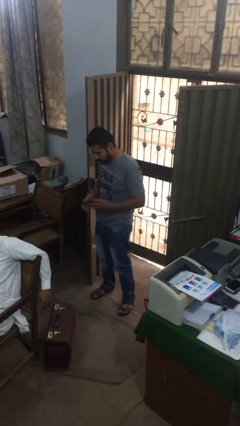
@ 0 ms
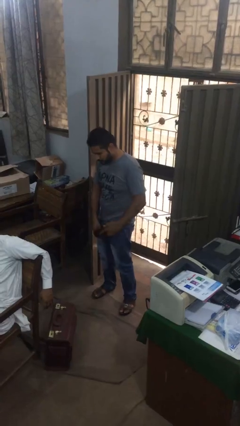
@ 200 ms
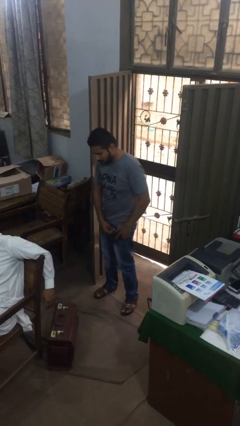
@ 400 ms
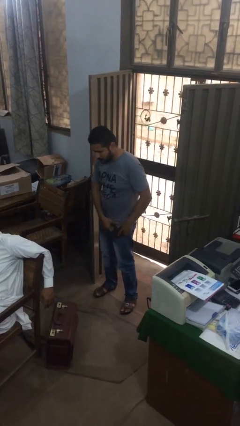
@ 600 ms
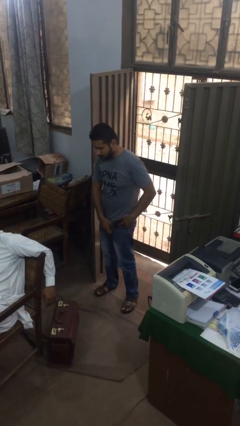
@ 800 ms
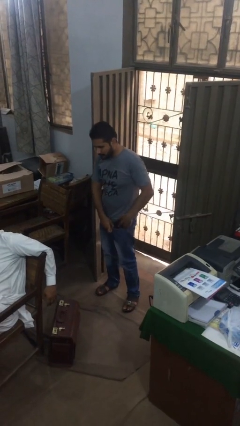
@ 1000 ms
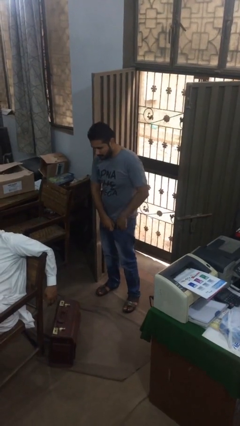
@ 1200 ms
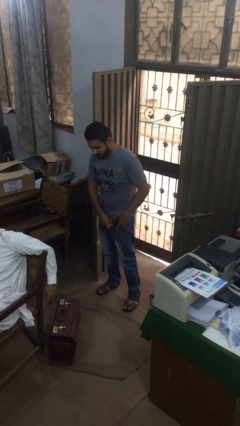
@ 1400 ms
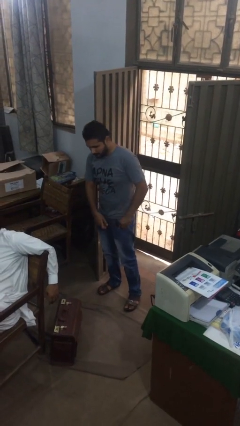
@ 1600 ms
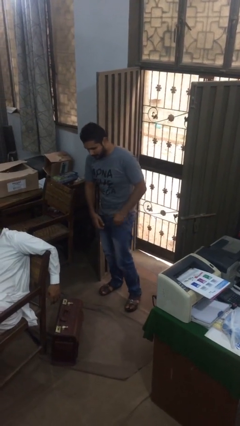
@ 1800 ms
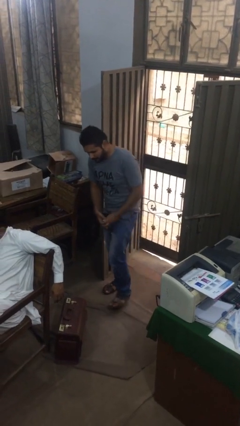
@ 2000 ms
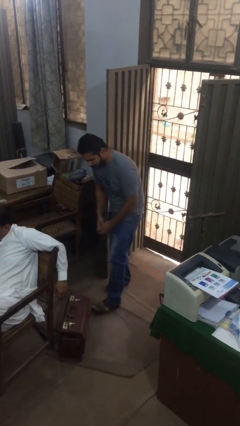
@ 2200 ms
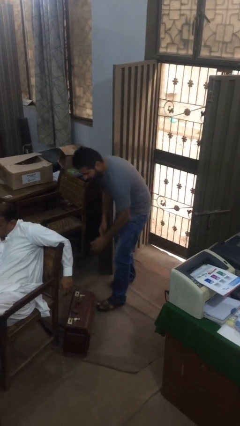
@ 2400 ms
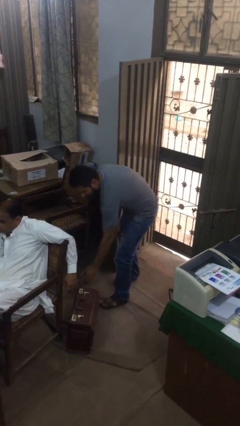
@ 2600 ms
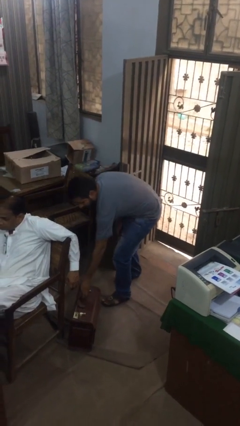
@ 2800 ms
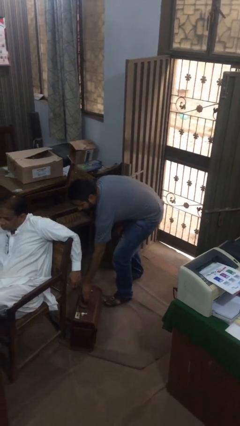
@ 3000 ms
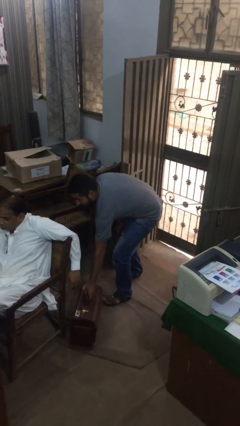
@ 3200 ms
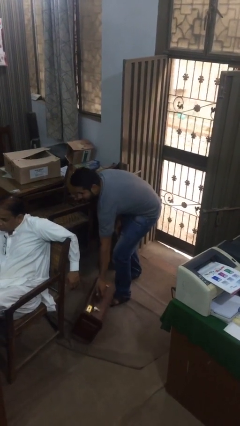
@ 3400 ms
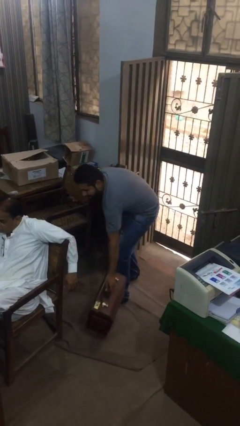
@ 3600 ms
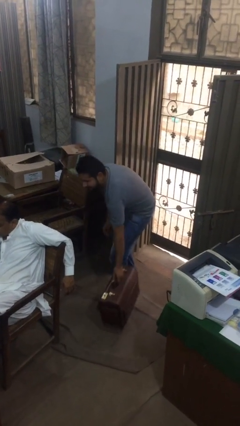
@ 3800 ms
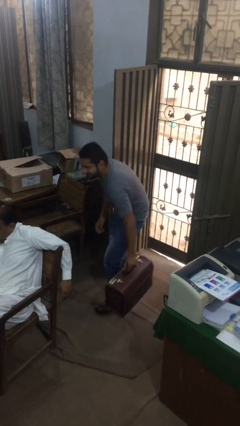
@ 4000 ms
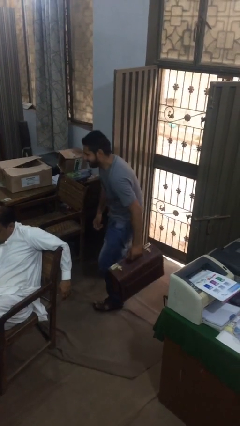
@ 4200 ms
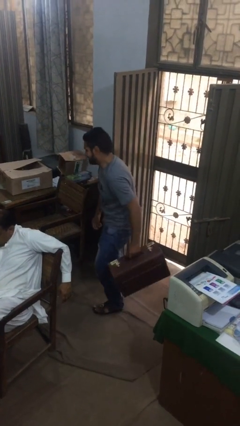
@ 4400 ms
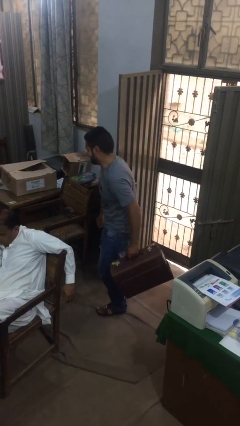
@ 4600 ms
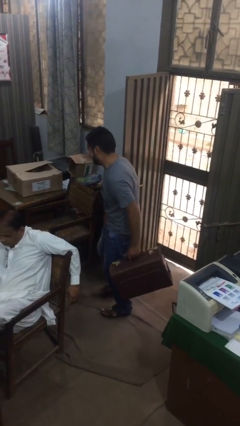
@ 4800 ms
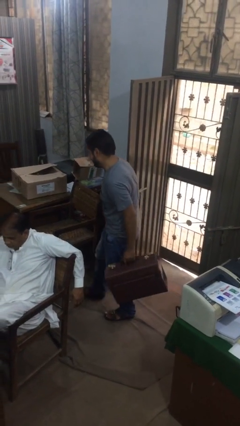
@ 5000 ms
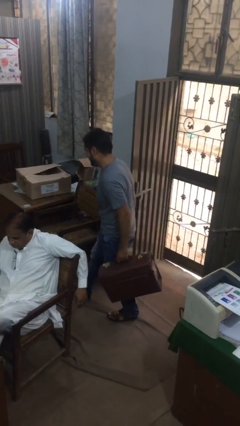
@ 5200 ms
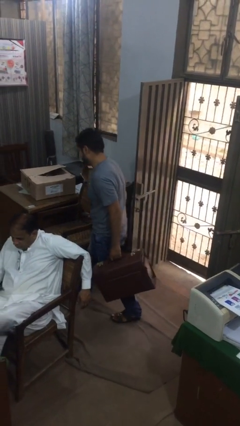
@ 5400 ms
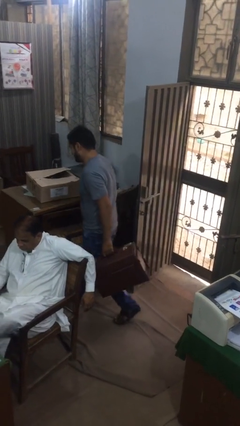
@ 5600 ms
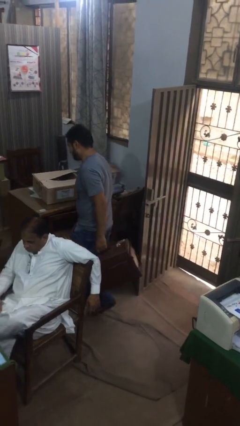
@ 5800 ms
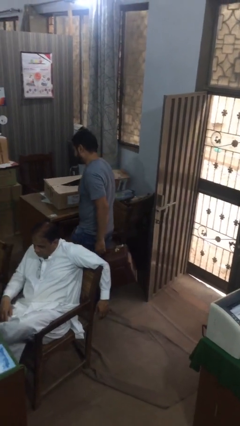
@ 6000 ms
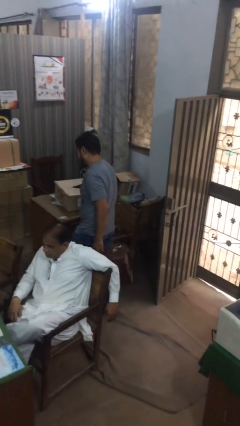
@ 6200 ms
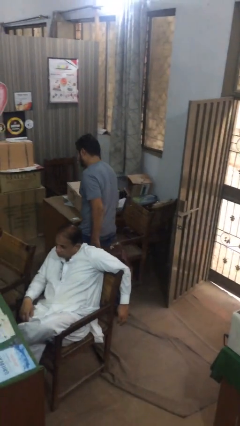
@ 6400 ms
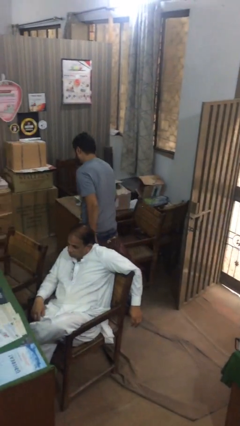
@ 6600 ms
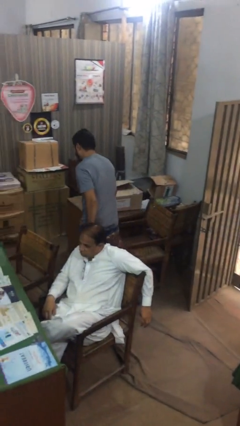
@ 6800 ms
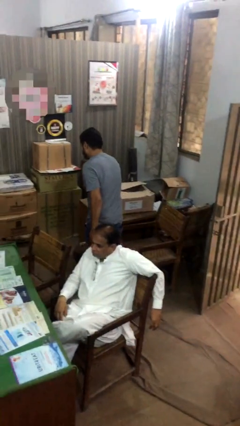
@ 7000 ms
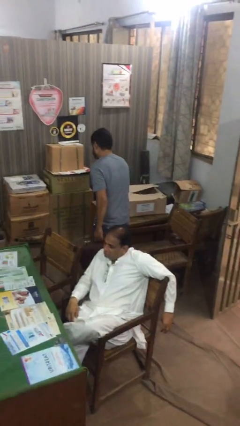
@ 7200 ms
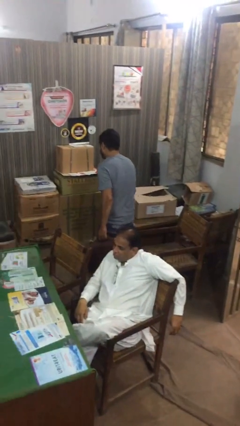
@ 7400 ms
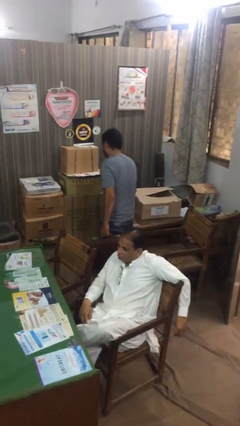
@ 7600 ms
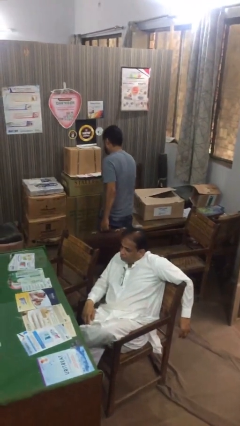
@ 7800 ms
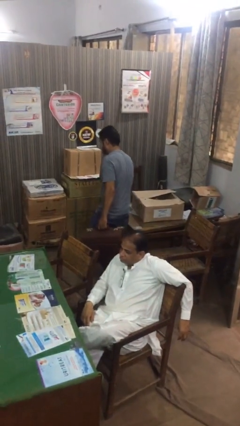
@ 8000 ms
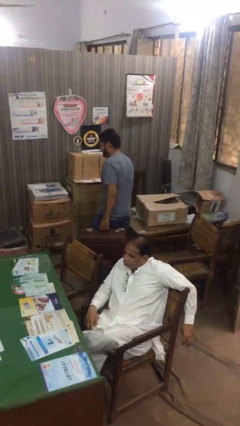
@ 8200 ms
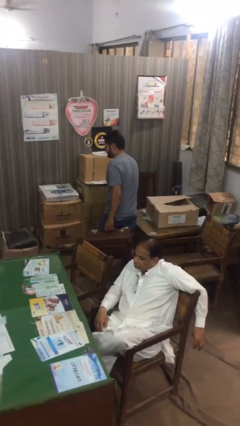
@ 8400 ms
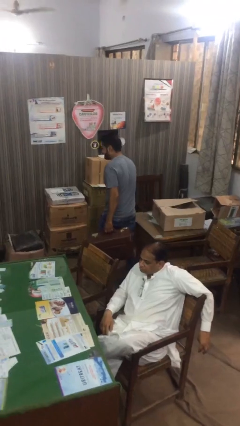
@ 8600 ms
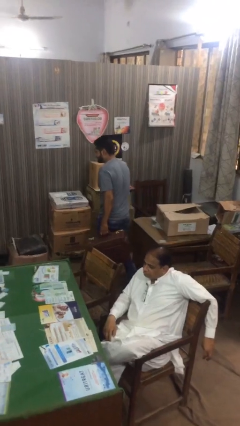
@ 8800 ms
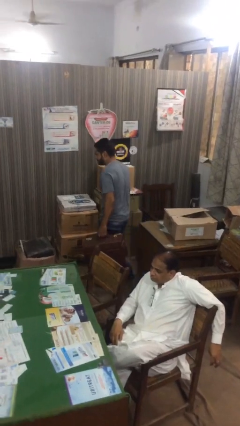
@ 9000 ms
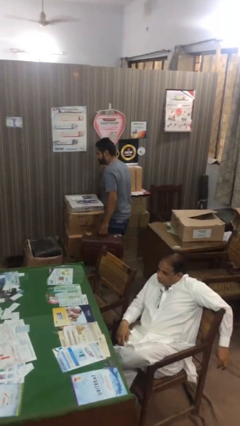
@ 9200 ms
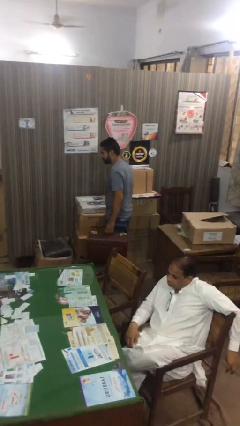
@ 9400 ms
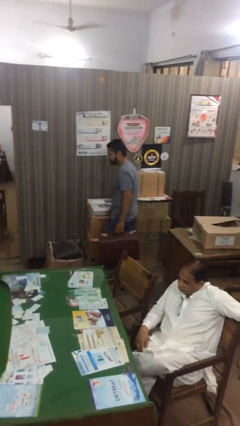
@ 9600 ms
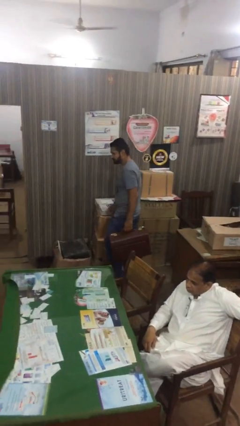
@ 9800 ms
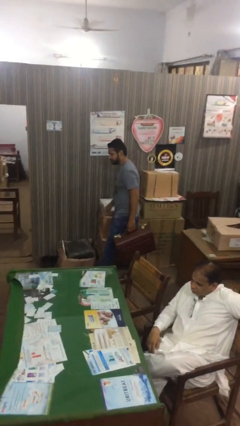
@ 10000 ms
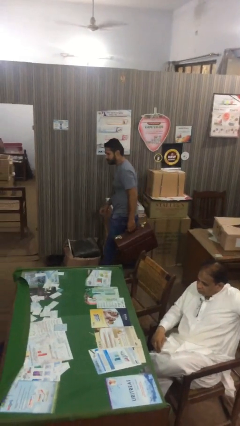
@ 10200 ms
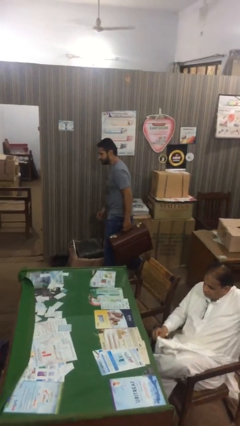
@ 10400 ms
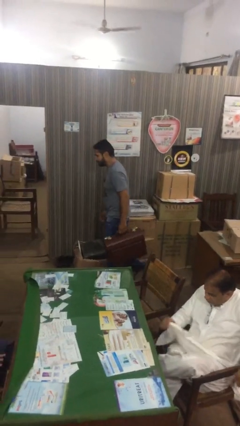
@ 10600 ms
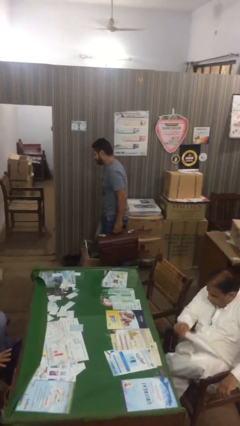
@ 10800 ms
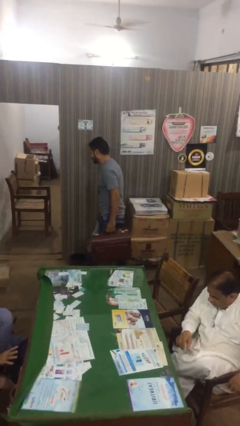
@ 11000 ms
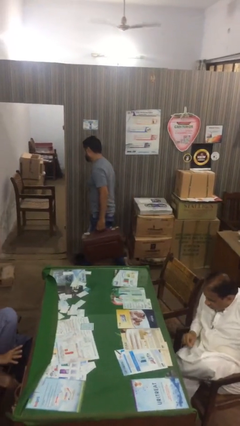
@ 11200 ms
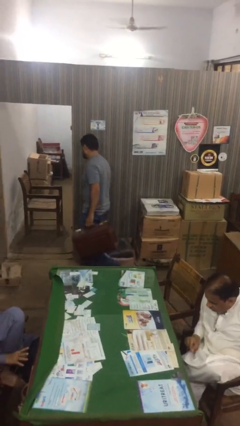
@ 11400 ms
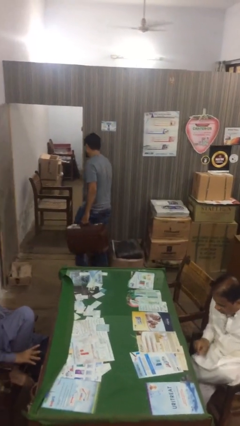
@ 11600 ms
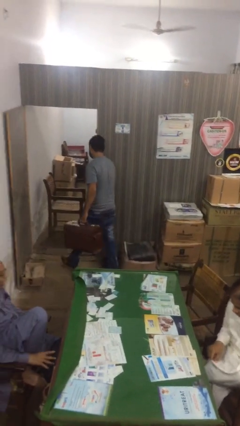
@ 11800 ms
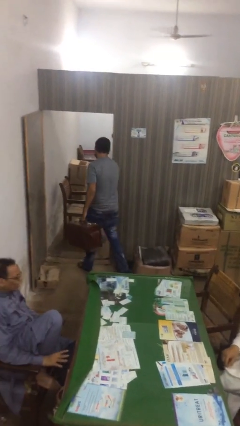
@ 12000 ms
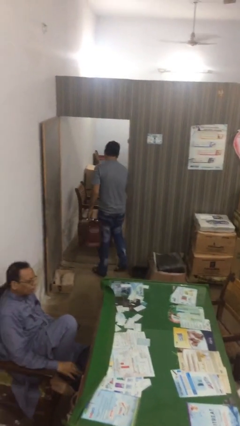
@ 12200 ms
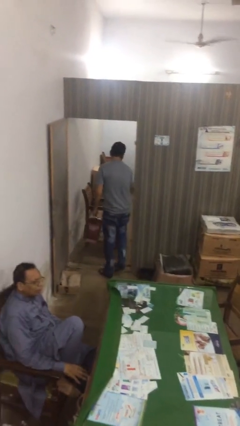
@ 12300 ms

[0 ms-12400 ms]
person steals object from person

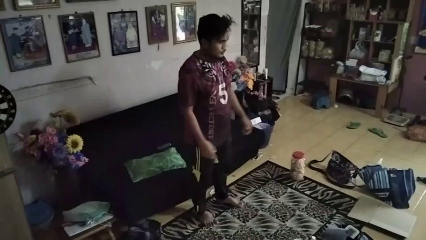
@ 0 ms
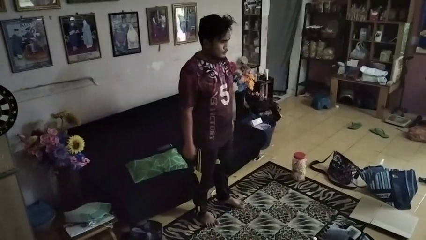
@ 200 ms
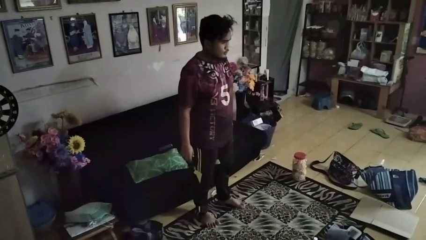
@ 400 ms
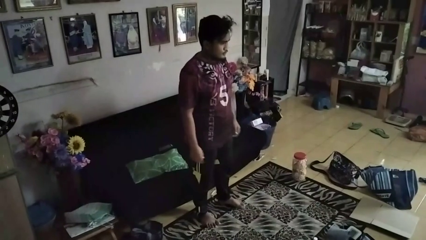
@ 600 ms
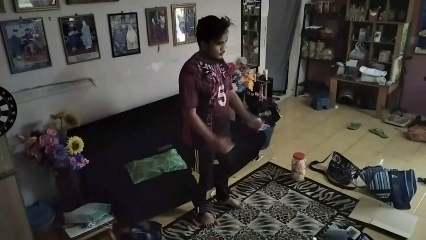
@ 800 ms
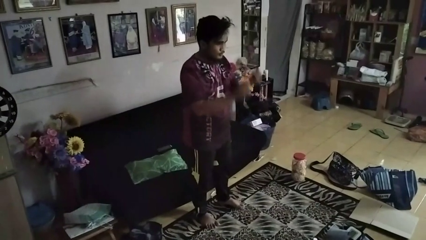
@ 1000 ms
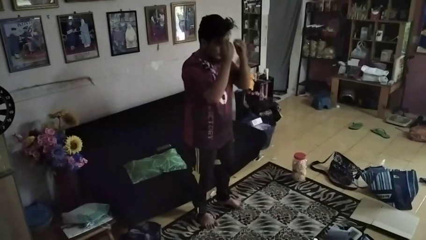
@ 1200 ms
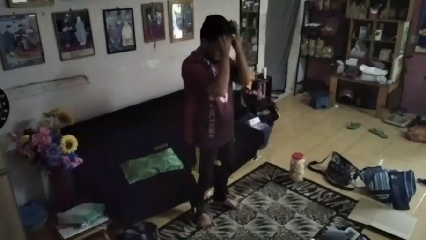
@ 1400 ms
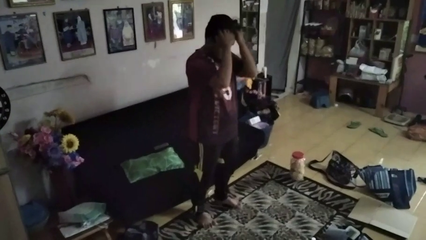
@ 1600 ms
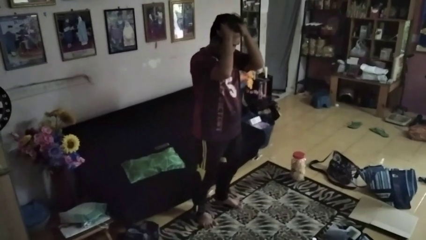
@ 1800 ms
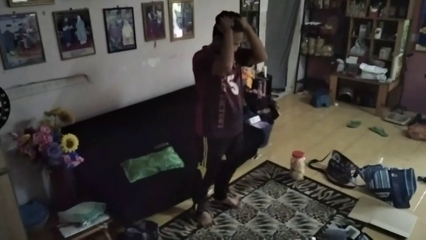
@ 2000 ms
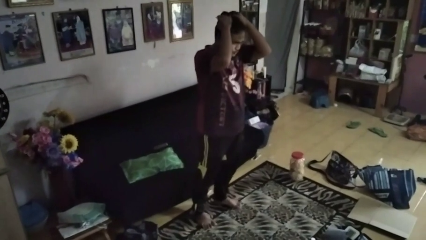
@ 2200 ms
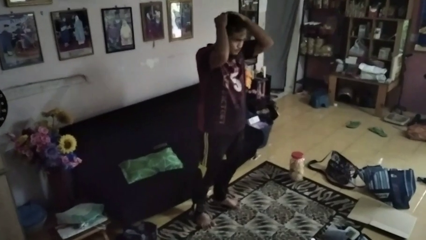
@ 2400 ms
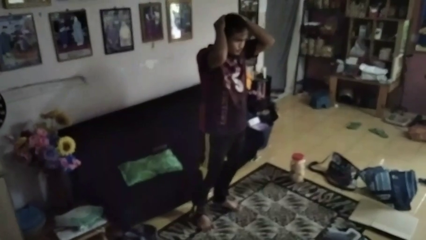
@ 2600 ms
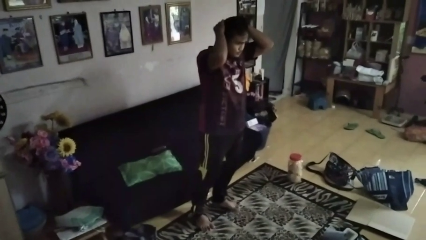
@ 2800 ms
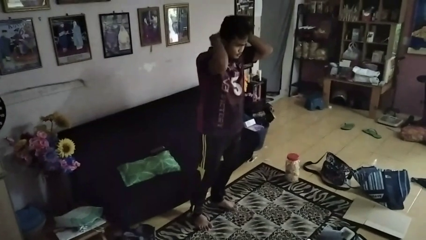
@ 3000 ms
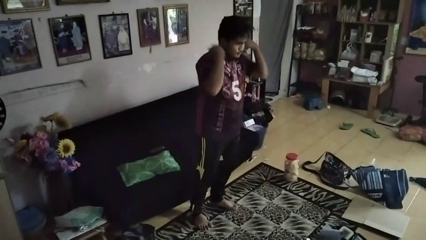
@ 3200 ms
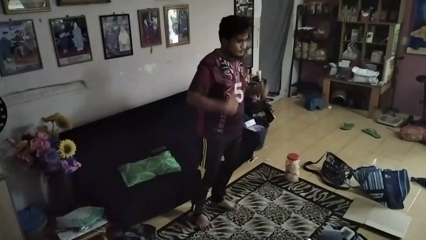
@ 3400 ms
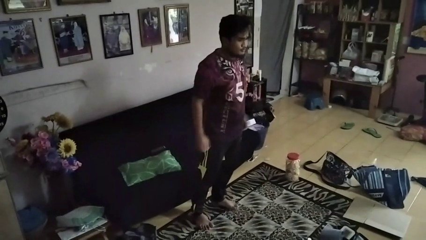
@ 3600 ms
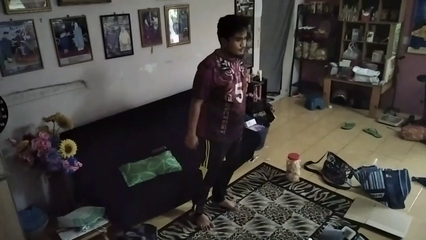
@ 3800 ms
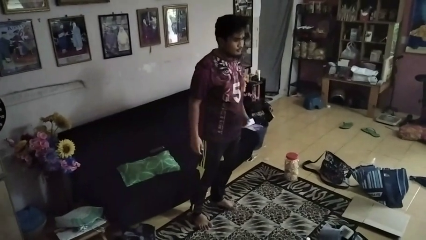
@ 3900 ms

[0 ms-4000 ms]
person strokes hair

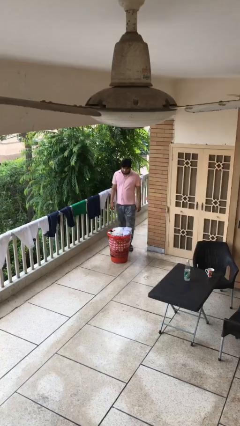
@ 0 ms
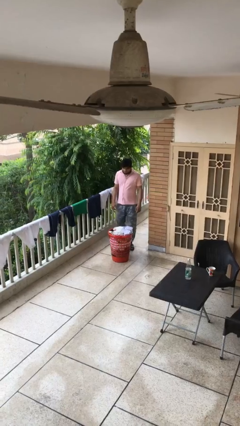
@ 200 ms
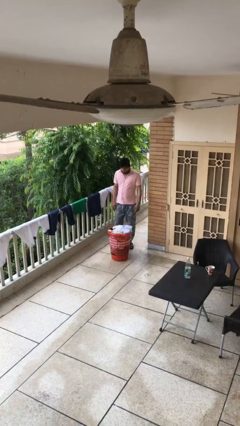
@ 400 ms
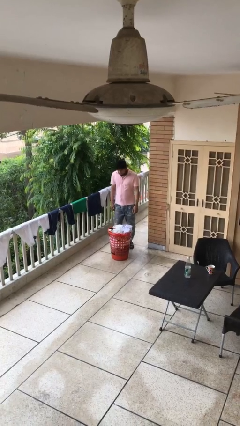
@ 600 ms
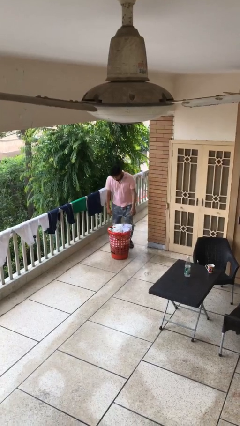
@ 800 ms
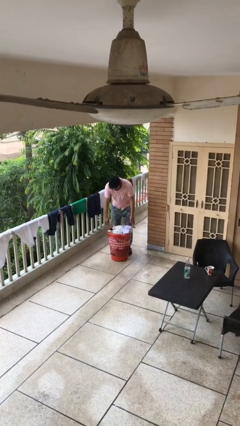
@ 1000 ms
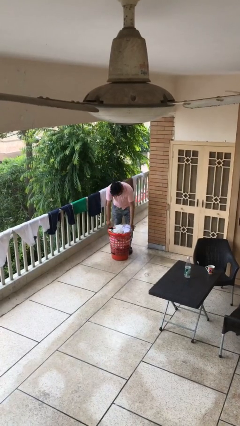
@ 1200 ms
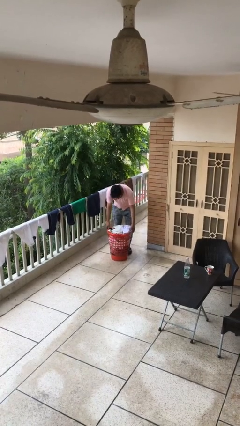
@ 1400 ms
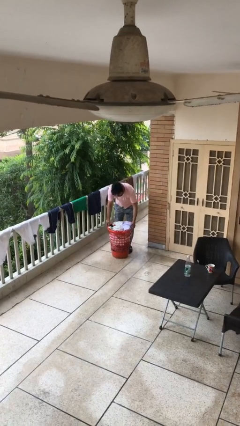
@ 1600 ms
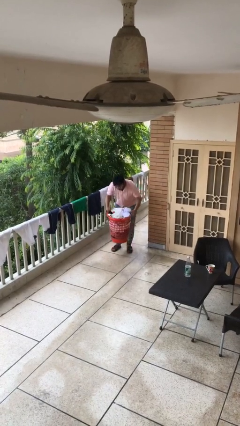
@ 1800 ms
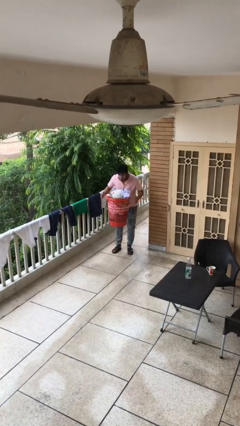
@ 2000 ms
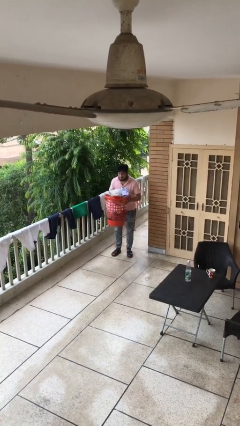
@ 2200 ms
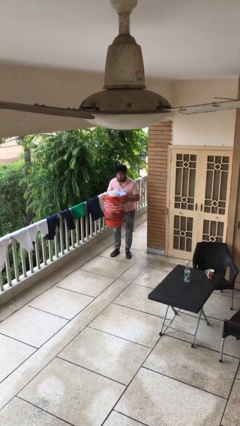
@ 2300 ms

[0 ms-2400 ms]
person picks up object from floor
